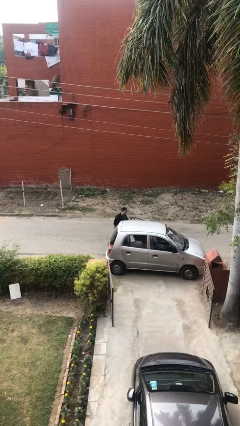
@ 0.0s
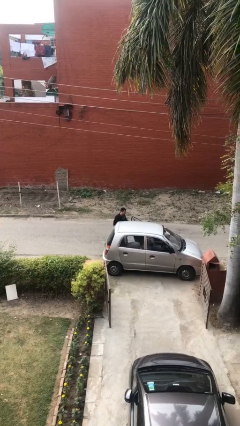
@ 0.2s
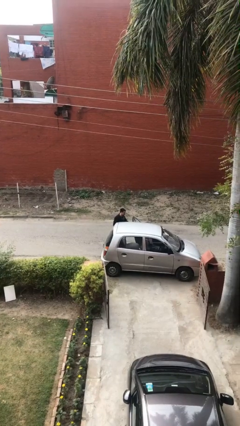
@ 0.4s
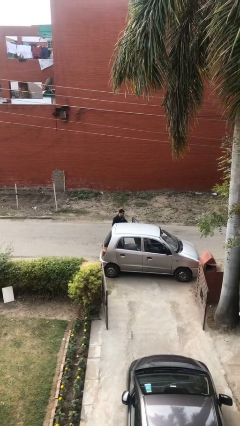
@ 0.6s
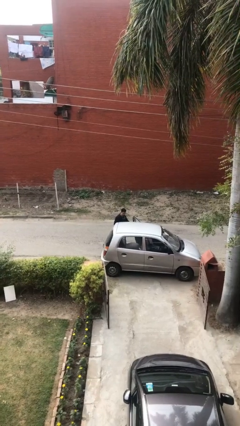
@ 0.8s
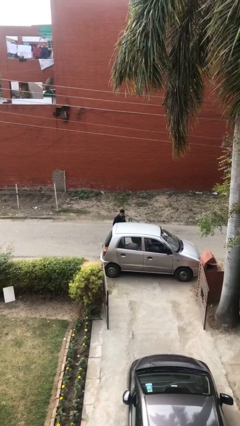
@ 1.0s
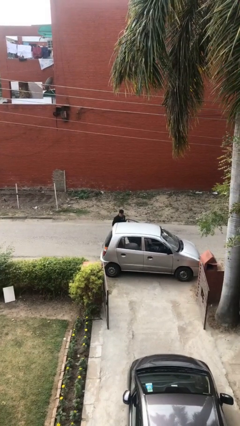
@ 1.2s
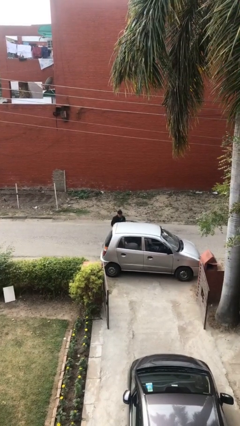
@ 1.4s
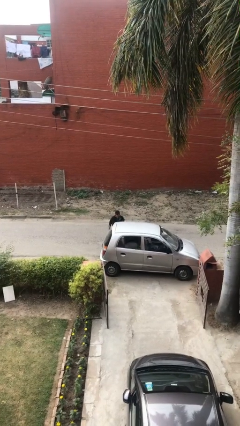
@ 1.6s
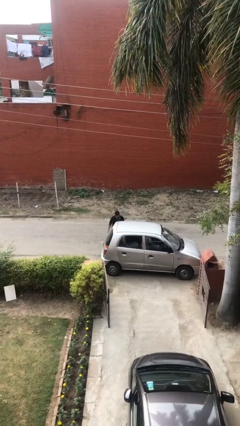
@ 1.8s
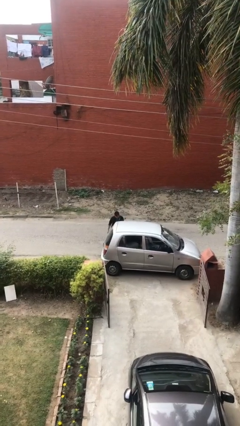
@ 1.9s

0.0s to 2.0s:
person closes car door

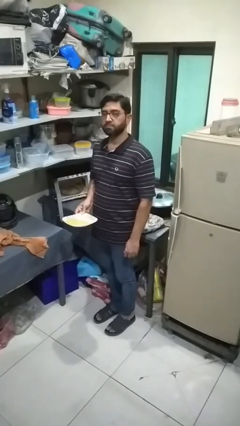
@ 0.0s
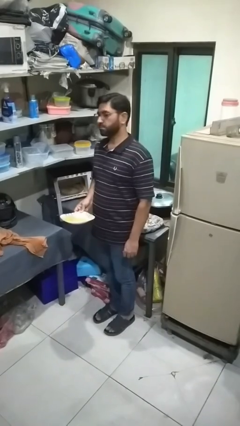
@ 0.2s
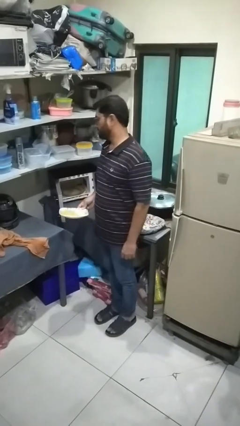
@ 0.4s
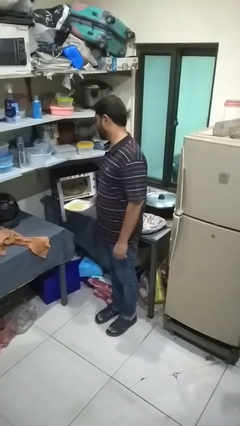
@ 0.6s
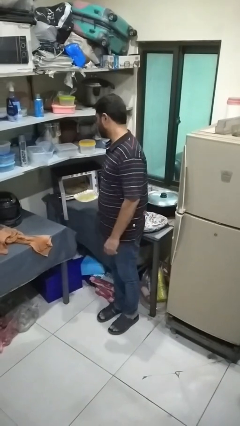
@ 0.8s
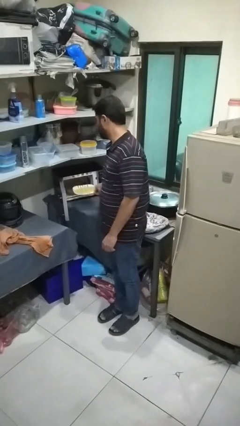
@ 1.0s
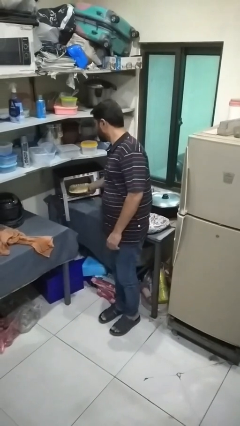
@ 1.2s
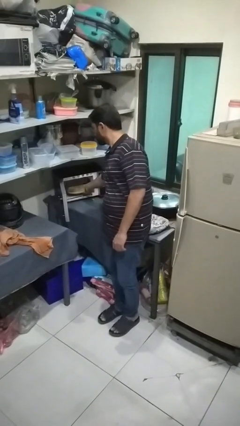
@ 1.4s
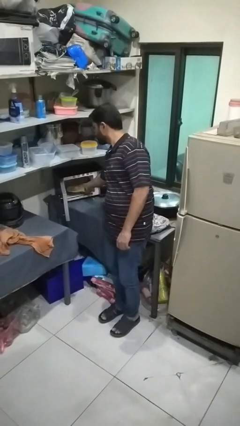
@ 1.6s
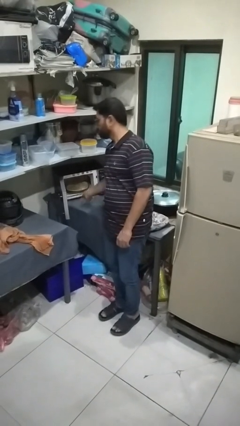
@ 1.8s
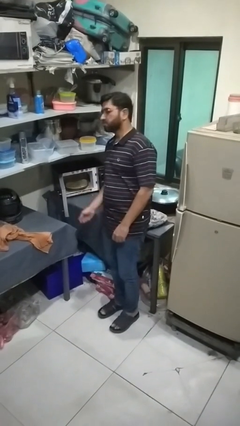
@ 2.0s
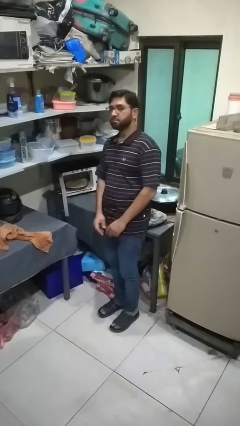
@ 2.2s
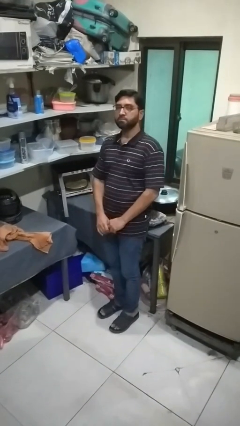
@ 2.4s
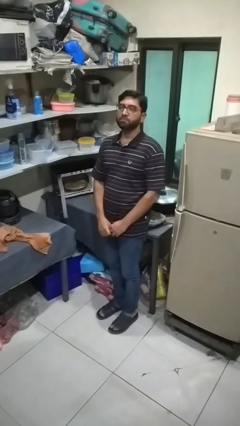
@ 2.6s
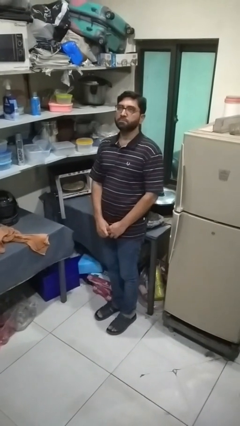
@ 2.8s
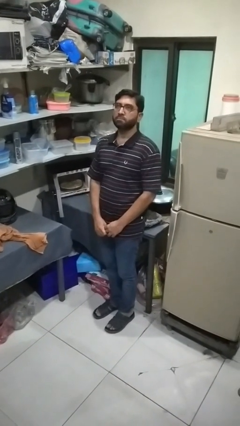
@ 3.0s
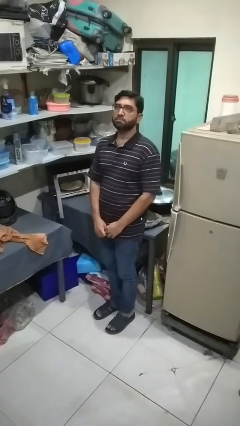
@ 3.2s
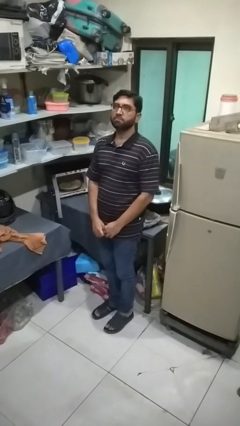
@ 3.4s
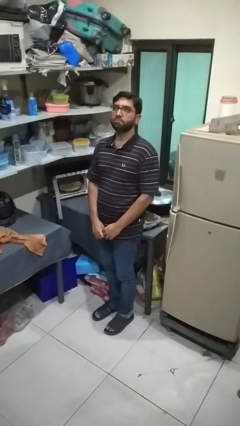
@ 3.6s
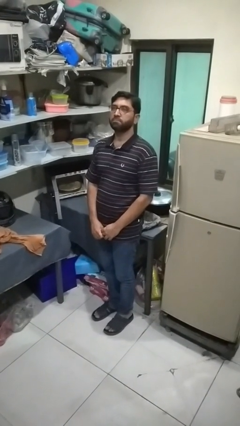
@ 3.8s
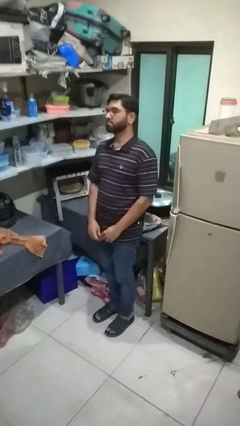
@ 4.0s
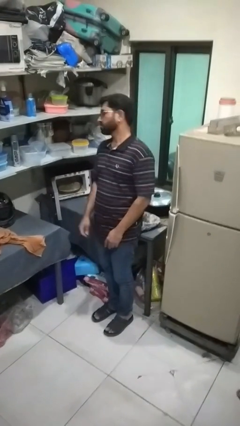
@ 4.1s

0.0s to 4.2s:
person puts object into microwave

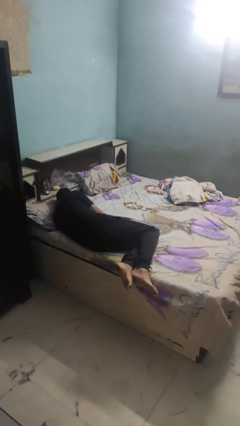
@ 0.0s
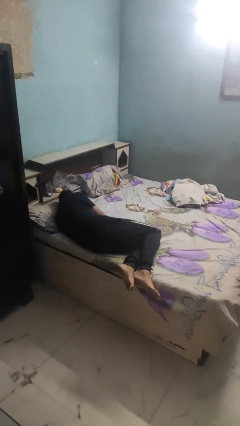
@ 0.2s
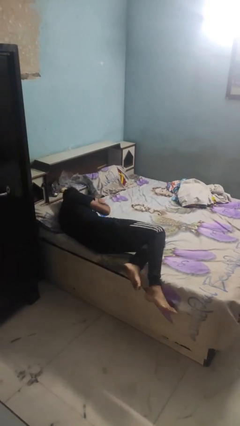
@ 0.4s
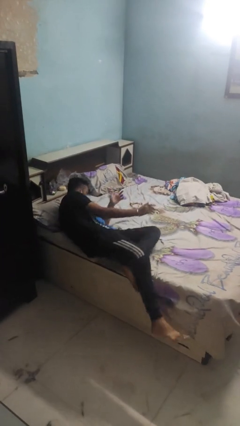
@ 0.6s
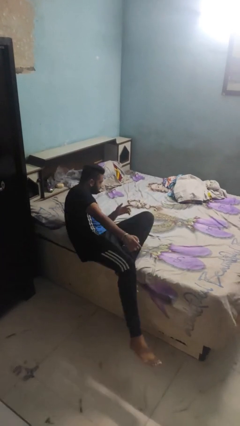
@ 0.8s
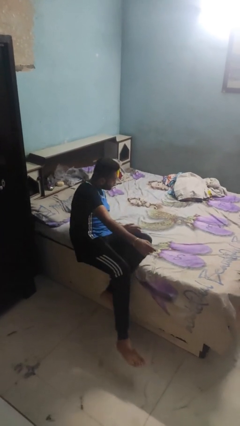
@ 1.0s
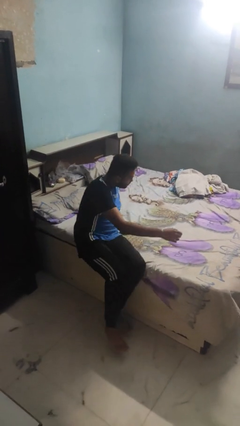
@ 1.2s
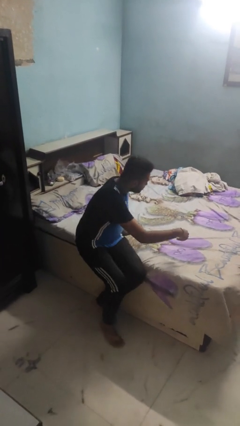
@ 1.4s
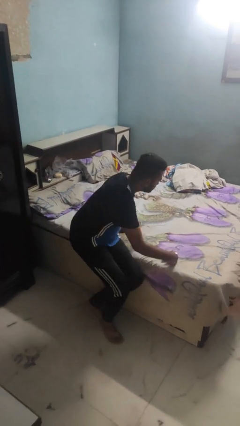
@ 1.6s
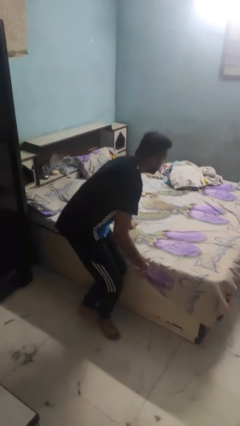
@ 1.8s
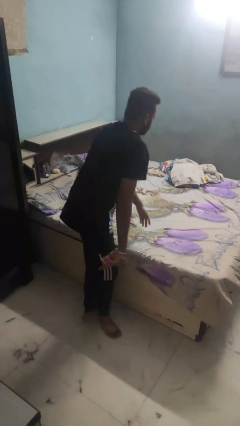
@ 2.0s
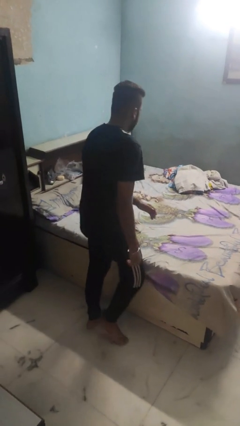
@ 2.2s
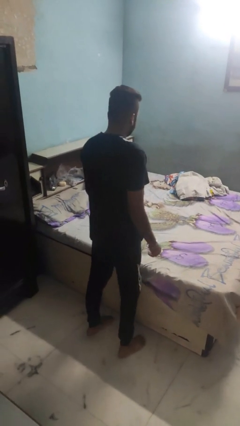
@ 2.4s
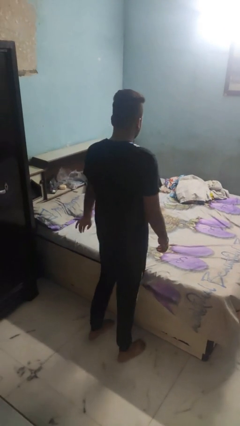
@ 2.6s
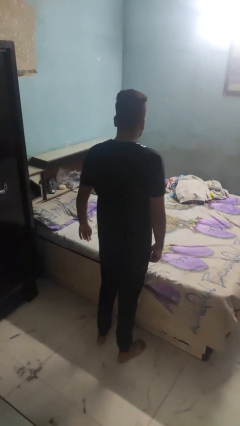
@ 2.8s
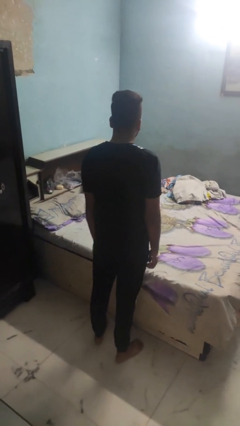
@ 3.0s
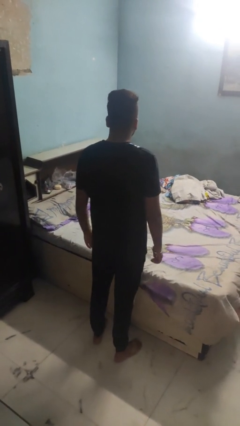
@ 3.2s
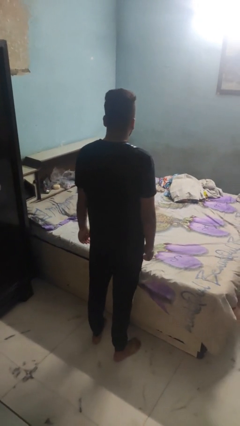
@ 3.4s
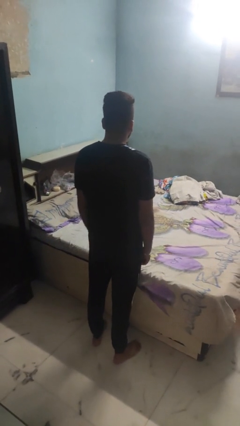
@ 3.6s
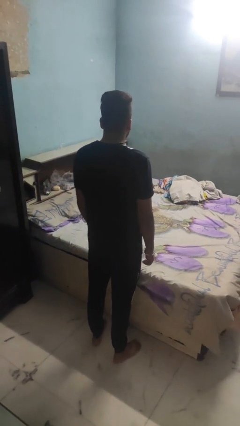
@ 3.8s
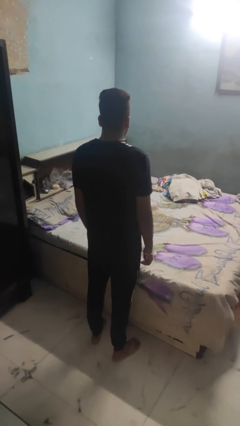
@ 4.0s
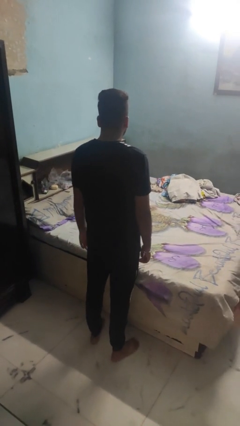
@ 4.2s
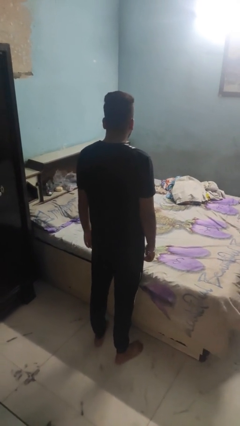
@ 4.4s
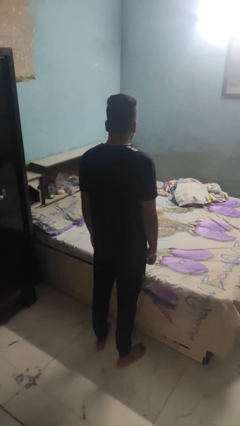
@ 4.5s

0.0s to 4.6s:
person stands up

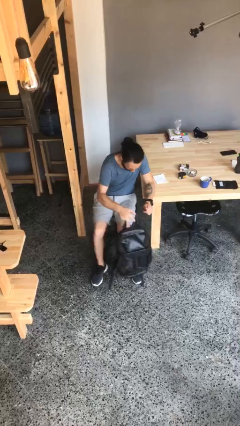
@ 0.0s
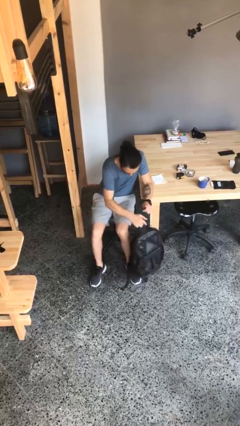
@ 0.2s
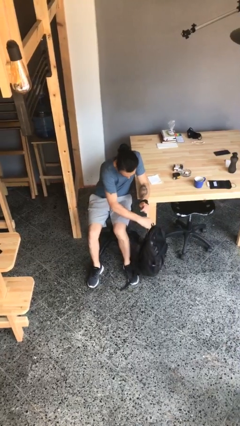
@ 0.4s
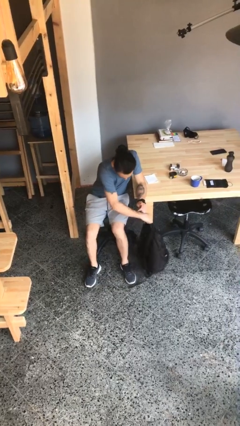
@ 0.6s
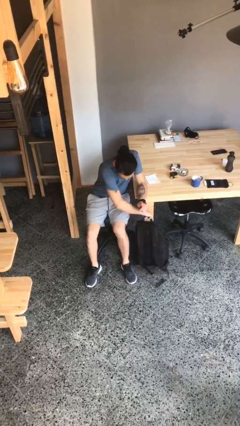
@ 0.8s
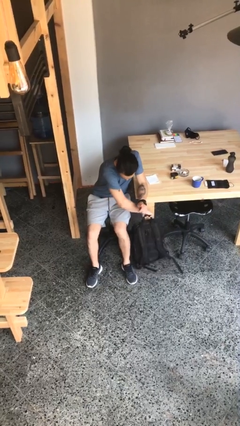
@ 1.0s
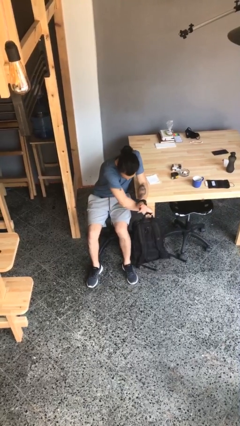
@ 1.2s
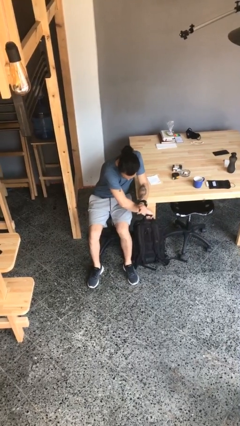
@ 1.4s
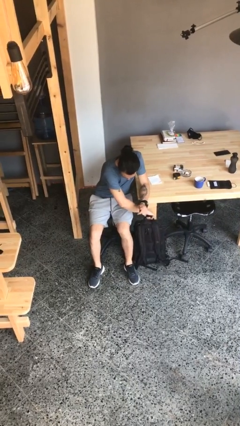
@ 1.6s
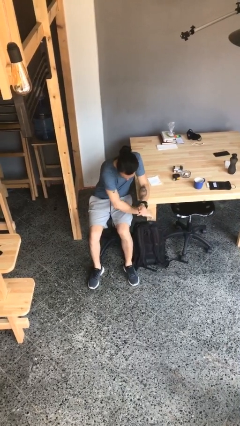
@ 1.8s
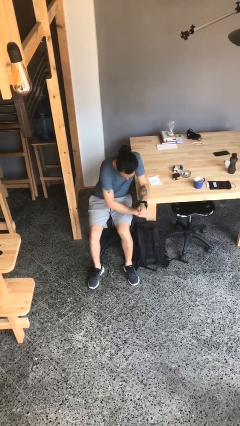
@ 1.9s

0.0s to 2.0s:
person puts down object on floor

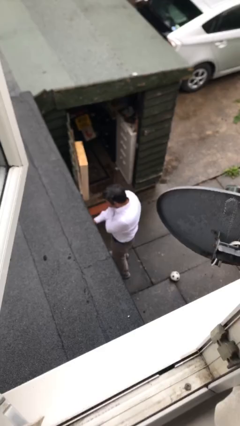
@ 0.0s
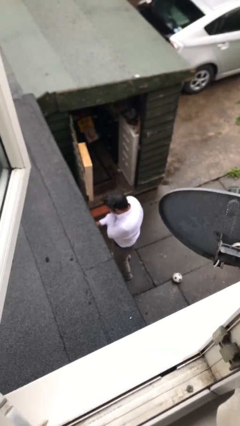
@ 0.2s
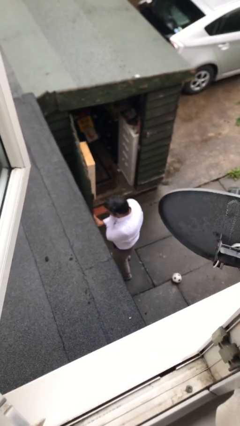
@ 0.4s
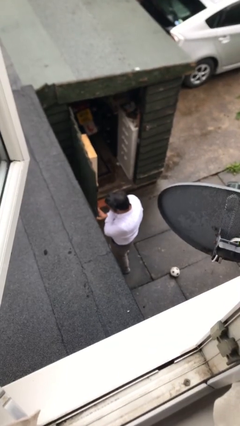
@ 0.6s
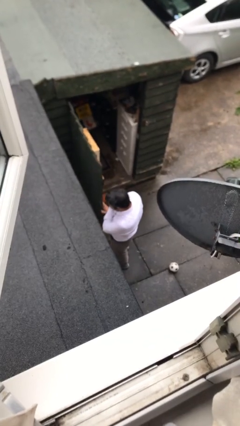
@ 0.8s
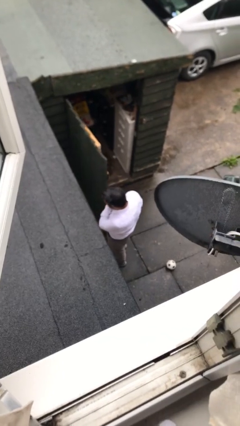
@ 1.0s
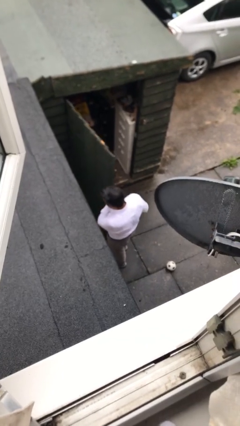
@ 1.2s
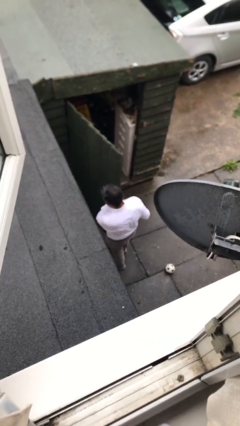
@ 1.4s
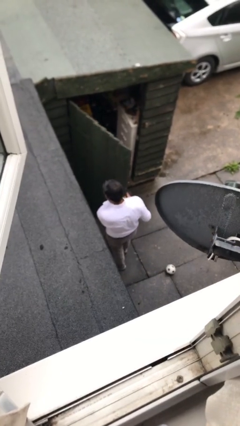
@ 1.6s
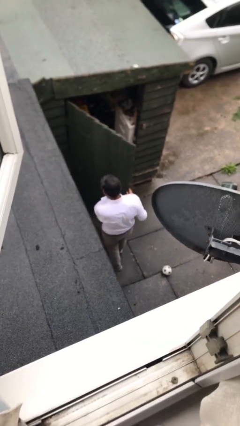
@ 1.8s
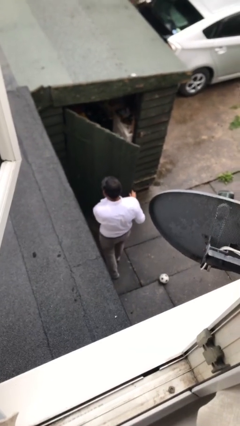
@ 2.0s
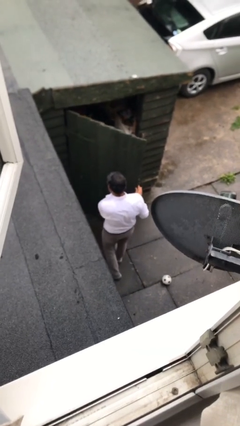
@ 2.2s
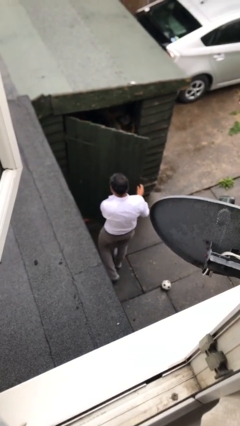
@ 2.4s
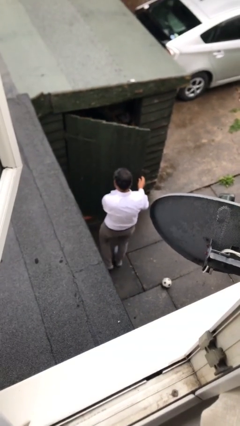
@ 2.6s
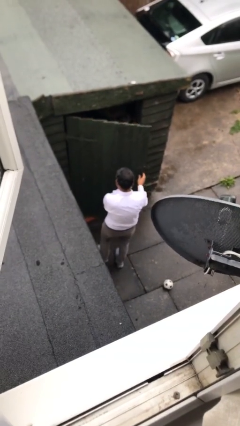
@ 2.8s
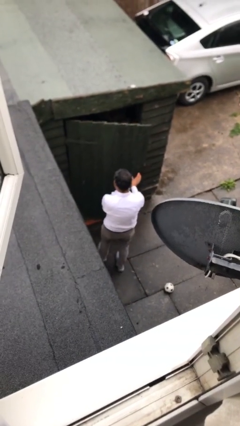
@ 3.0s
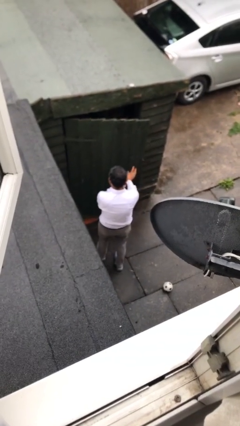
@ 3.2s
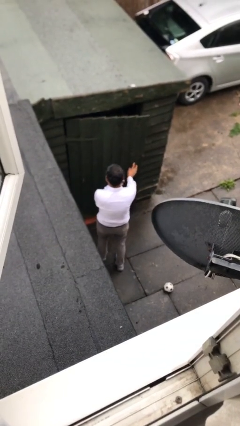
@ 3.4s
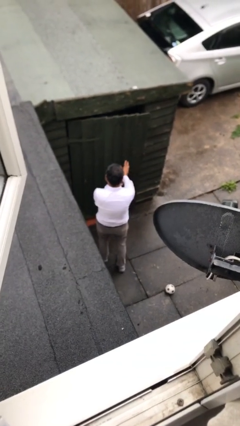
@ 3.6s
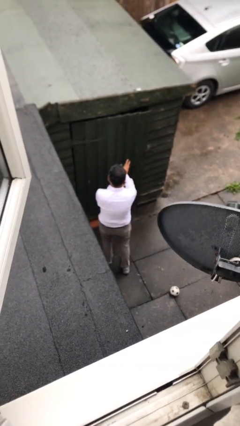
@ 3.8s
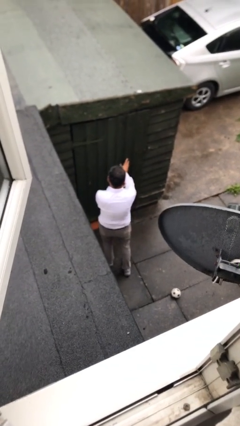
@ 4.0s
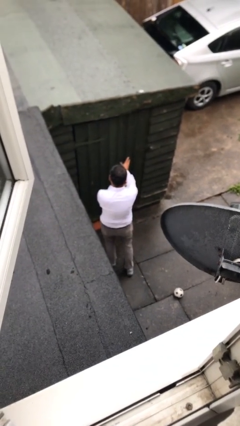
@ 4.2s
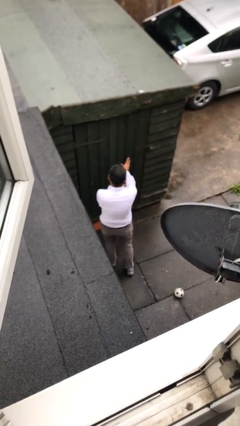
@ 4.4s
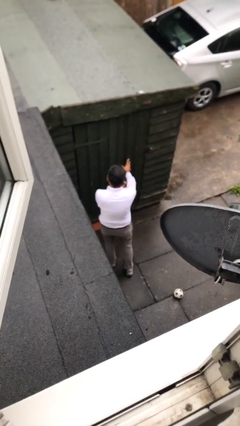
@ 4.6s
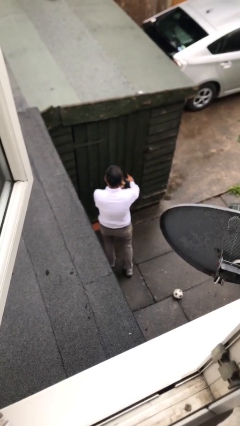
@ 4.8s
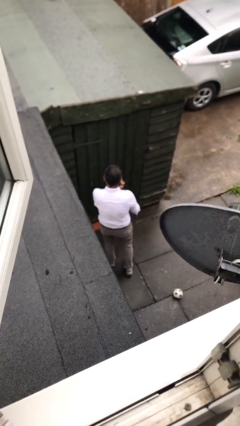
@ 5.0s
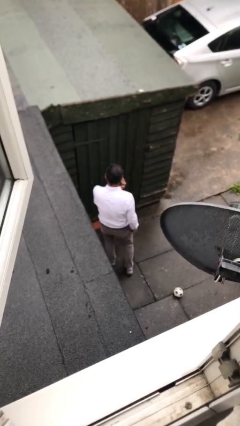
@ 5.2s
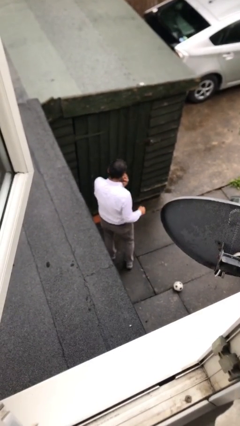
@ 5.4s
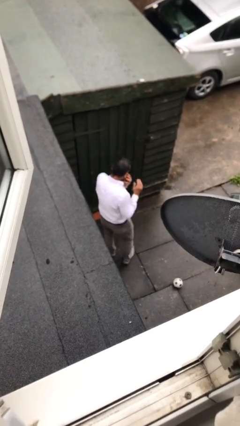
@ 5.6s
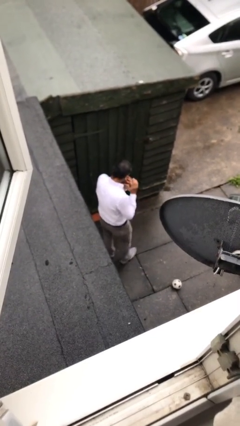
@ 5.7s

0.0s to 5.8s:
person closes facility door
